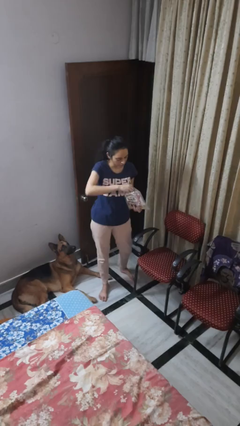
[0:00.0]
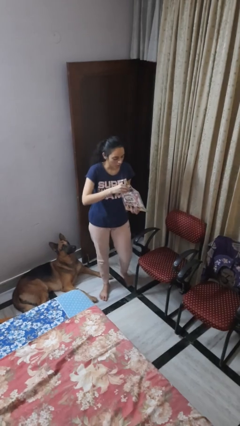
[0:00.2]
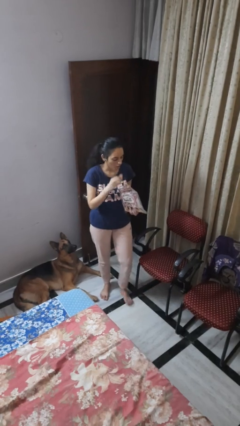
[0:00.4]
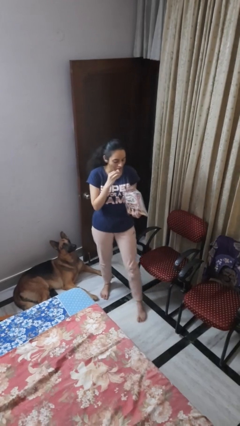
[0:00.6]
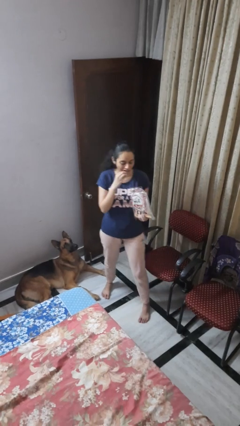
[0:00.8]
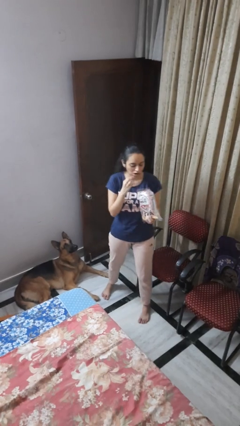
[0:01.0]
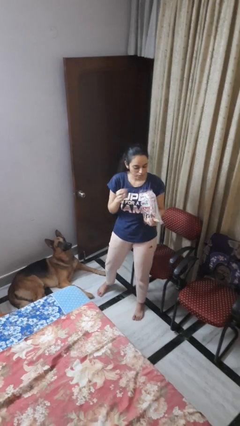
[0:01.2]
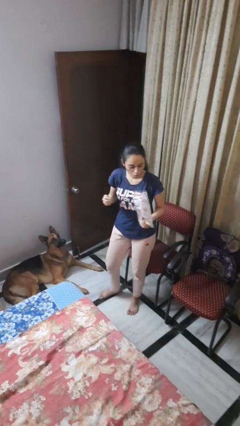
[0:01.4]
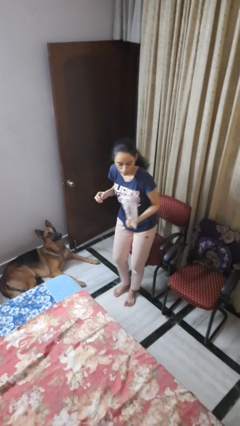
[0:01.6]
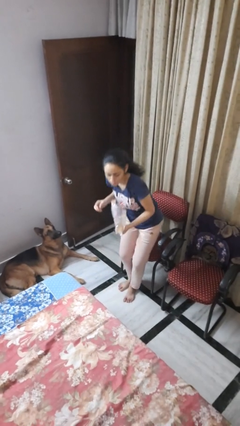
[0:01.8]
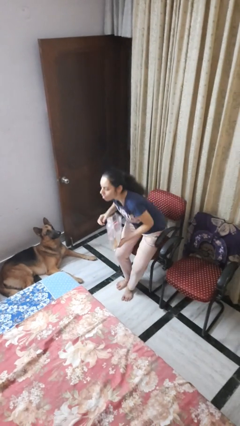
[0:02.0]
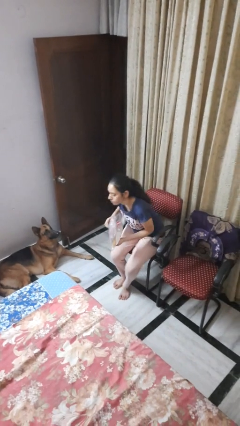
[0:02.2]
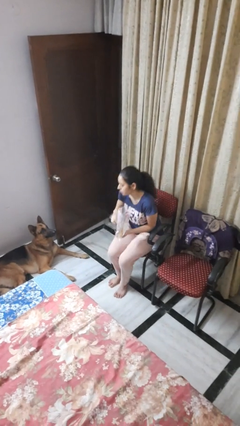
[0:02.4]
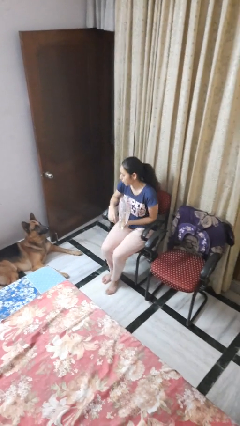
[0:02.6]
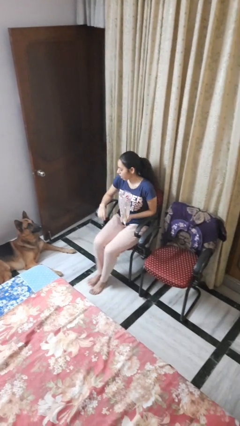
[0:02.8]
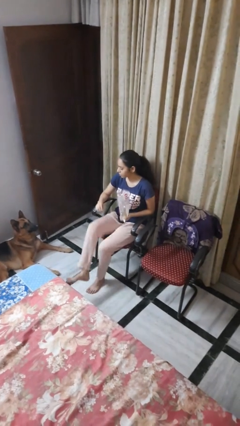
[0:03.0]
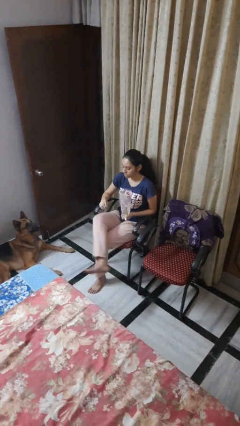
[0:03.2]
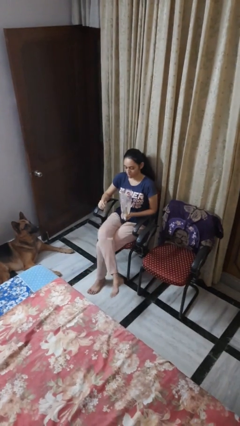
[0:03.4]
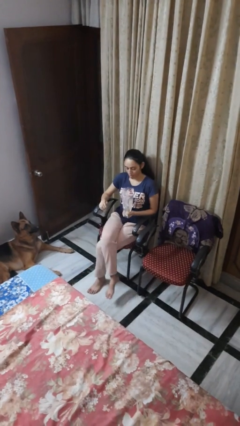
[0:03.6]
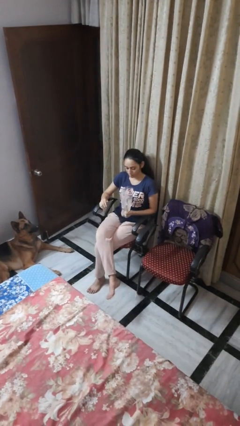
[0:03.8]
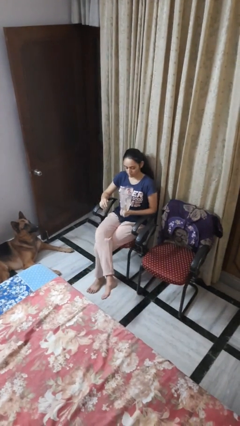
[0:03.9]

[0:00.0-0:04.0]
person eats snack from bag

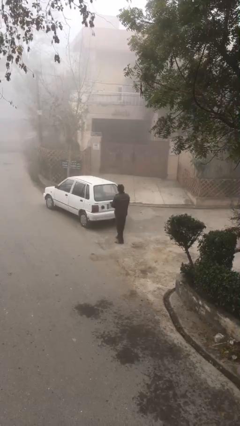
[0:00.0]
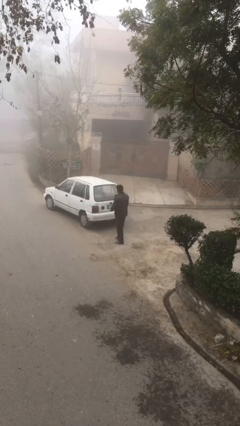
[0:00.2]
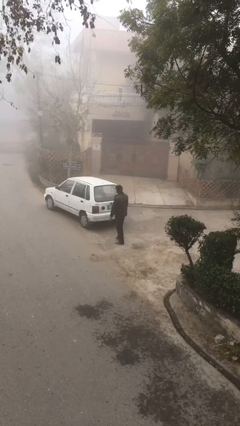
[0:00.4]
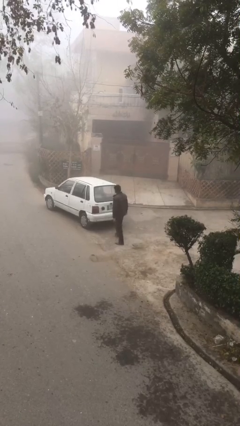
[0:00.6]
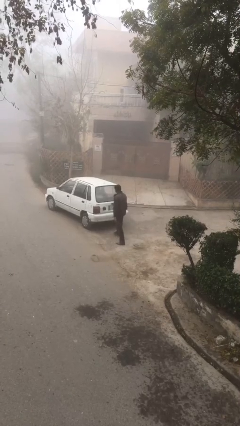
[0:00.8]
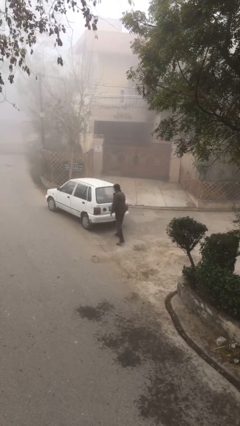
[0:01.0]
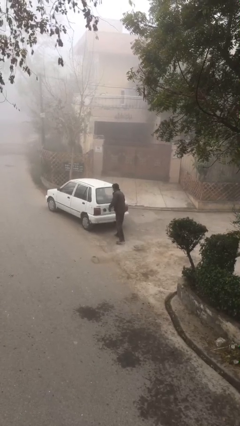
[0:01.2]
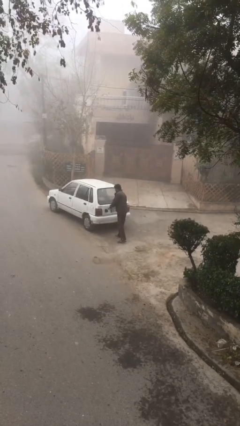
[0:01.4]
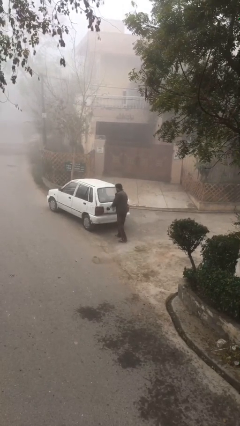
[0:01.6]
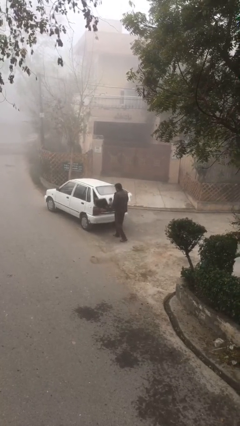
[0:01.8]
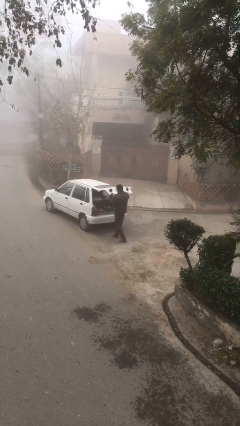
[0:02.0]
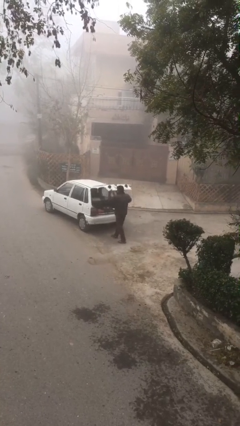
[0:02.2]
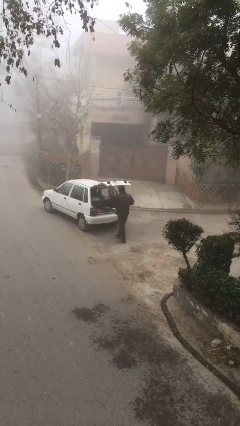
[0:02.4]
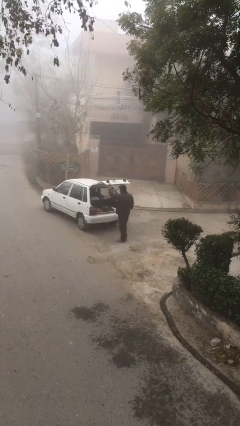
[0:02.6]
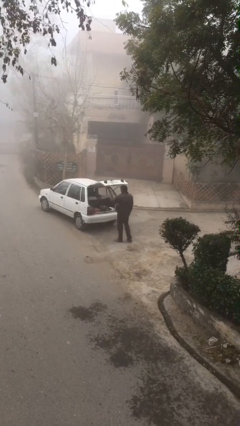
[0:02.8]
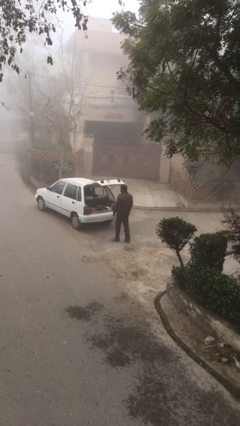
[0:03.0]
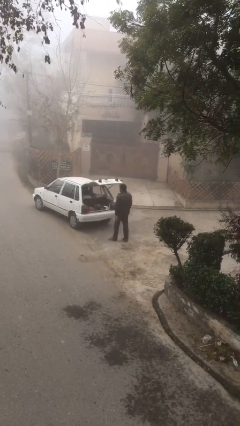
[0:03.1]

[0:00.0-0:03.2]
person opens car trunk

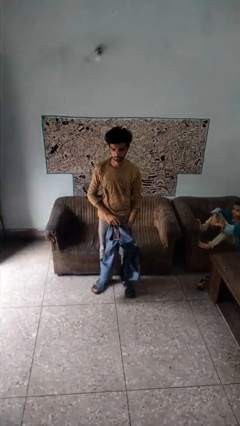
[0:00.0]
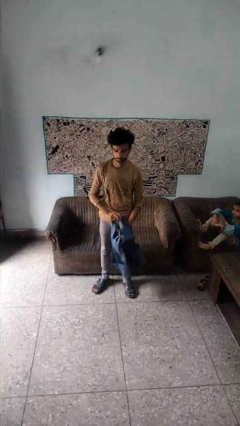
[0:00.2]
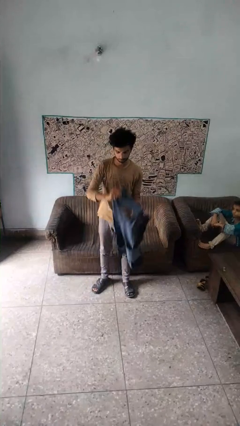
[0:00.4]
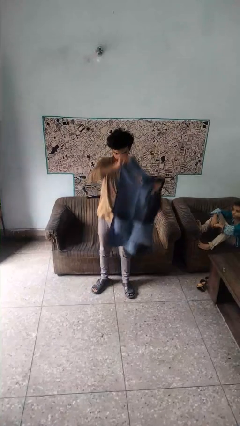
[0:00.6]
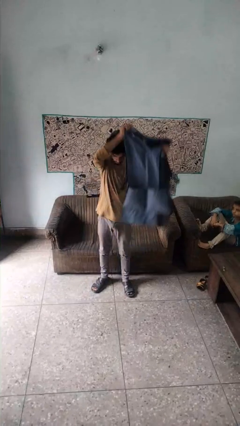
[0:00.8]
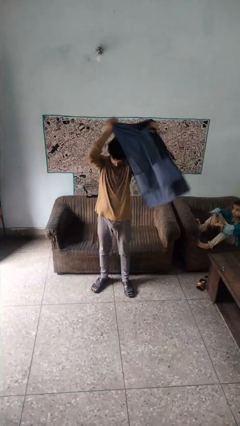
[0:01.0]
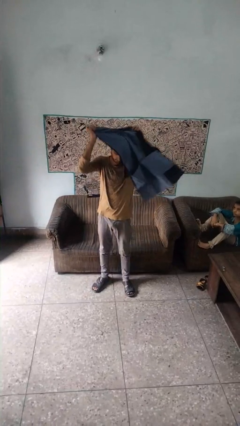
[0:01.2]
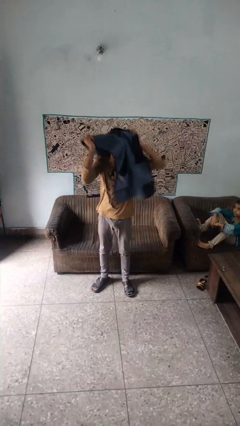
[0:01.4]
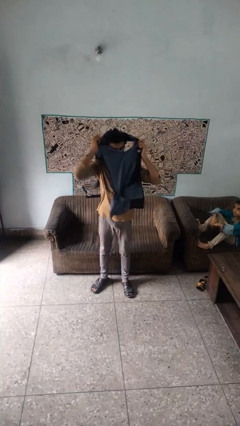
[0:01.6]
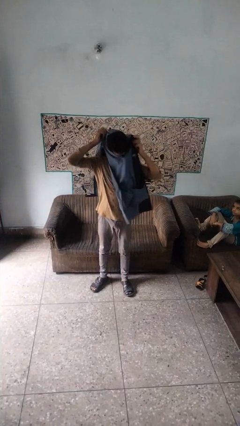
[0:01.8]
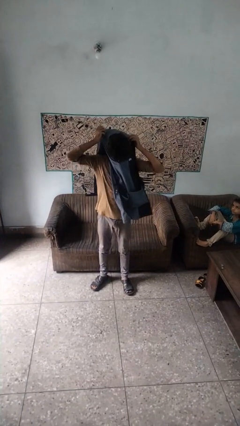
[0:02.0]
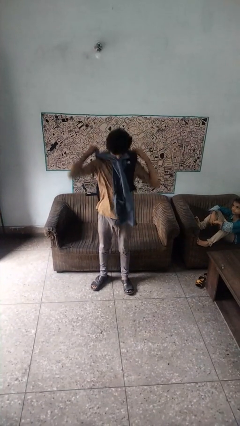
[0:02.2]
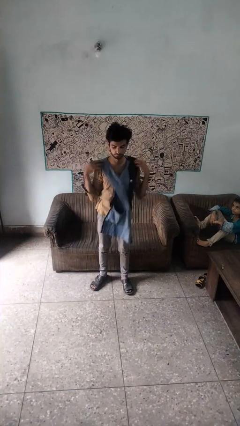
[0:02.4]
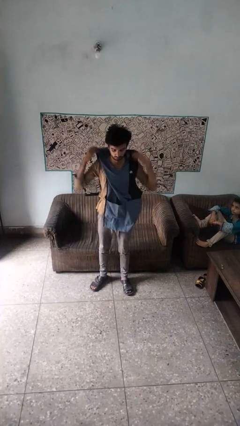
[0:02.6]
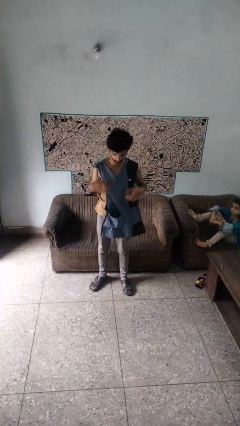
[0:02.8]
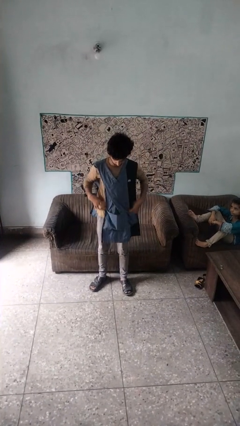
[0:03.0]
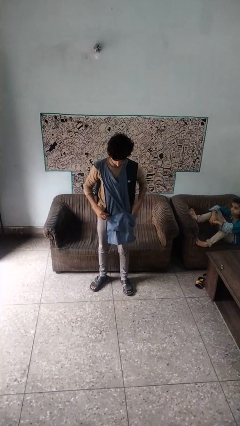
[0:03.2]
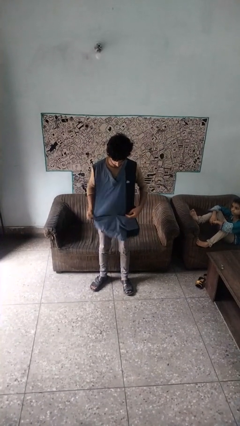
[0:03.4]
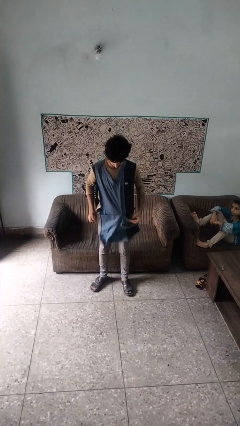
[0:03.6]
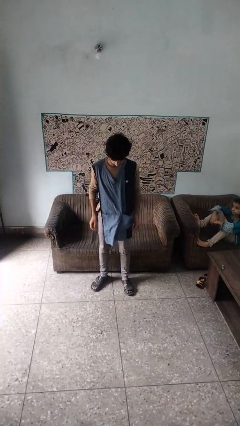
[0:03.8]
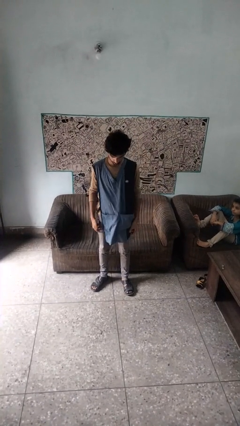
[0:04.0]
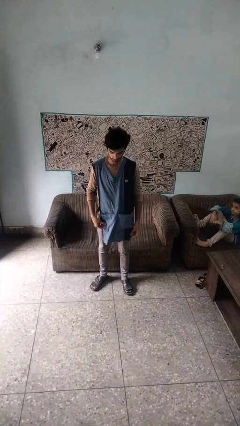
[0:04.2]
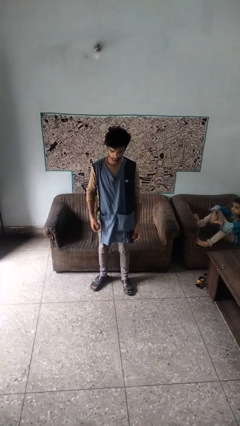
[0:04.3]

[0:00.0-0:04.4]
person puts on apron

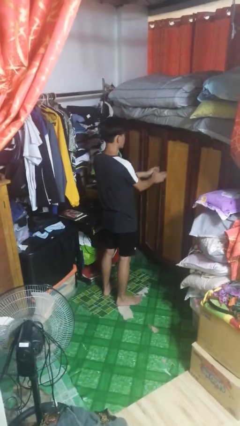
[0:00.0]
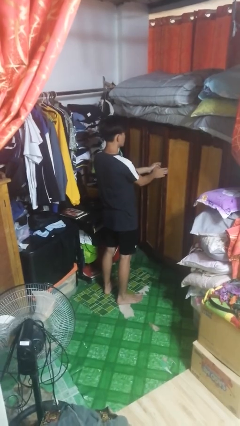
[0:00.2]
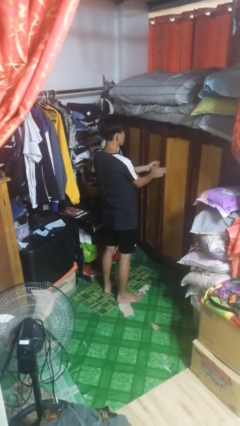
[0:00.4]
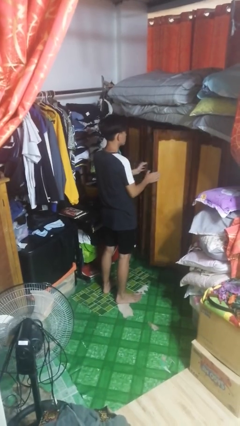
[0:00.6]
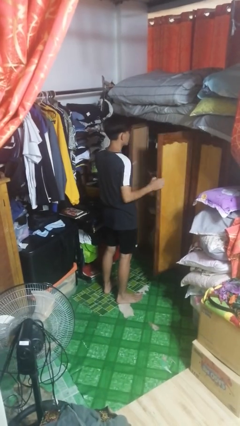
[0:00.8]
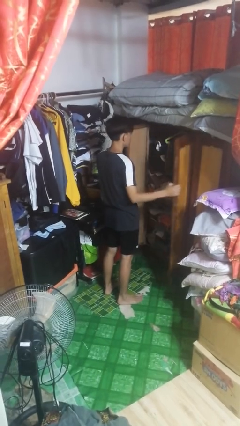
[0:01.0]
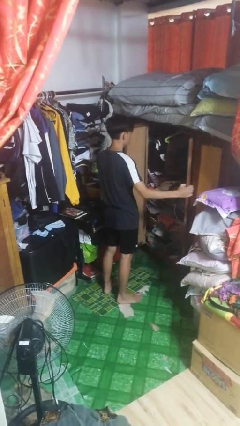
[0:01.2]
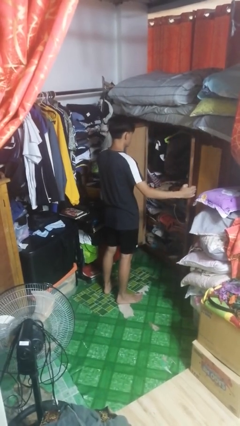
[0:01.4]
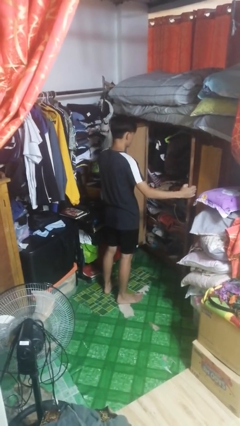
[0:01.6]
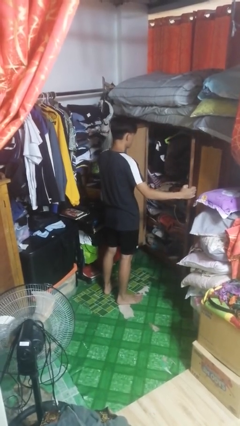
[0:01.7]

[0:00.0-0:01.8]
person opens dresser drawer

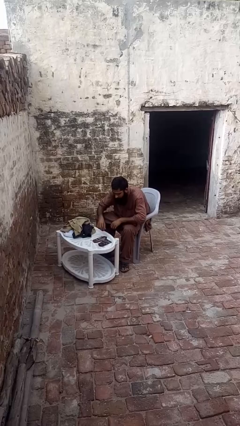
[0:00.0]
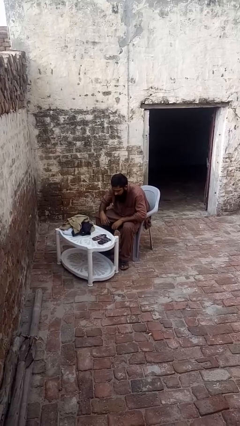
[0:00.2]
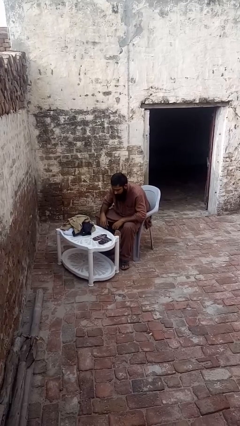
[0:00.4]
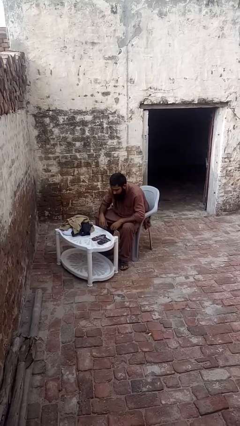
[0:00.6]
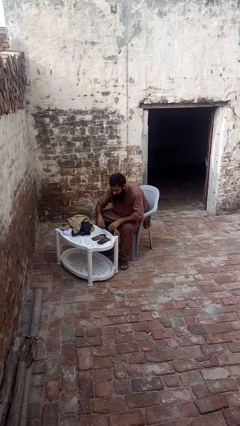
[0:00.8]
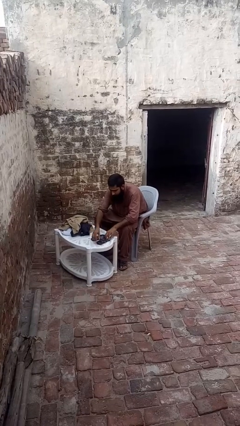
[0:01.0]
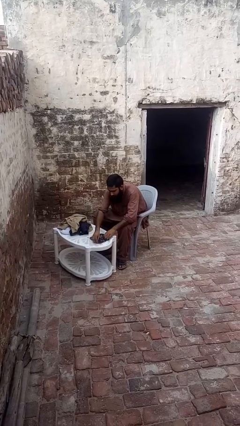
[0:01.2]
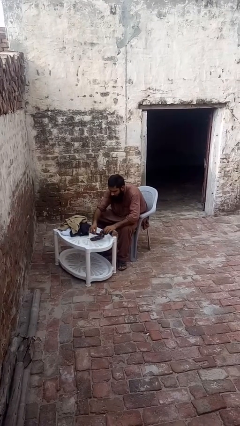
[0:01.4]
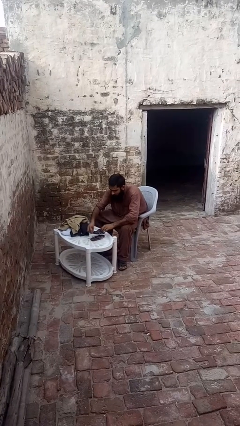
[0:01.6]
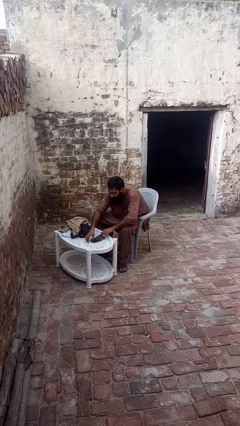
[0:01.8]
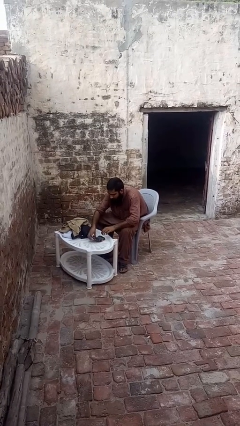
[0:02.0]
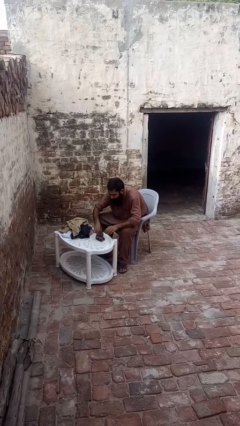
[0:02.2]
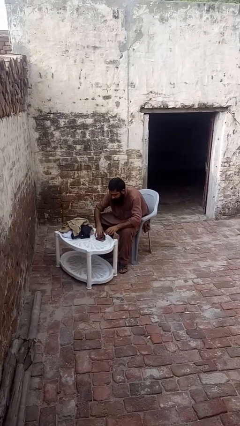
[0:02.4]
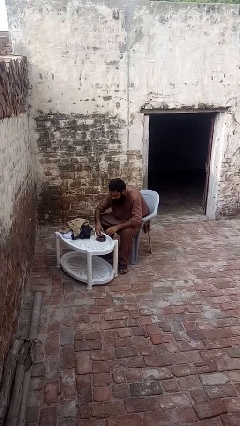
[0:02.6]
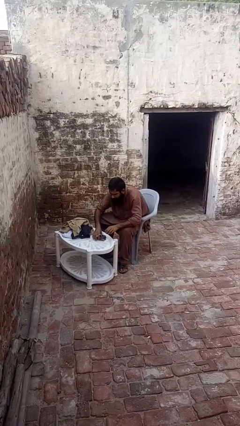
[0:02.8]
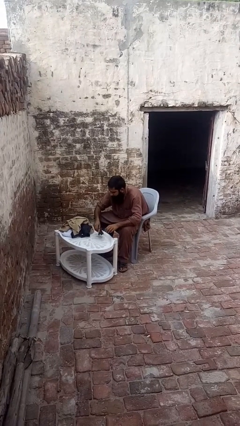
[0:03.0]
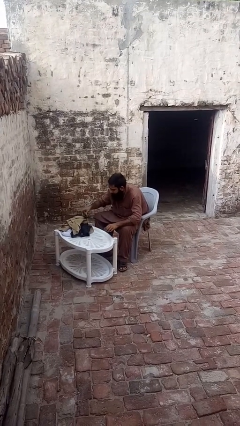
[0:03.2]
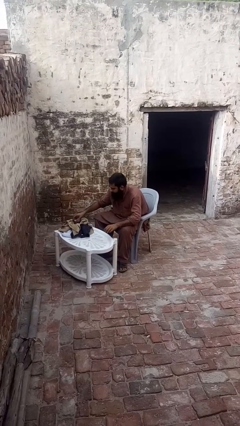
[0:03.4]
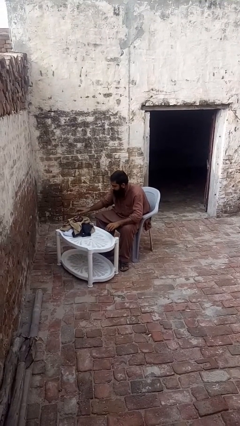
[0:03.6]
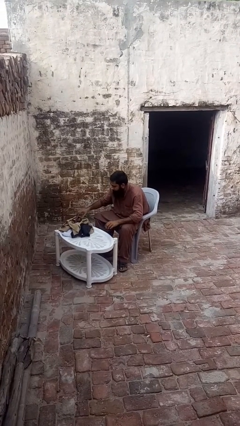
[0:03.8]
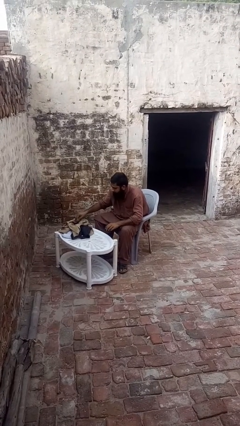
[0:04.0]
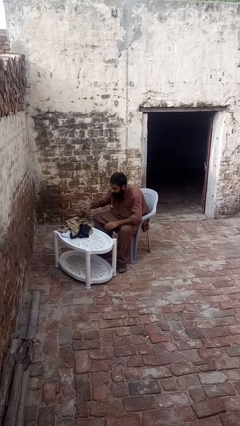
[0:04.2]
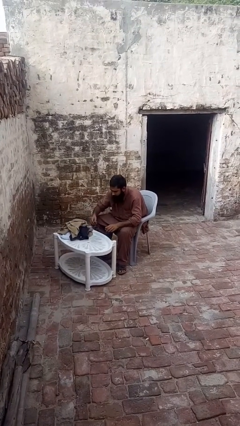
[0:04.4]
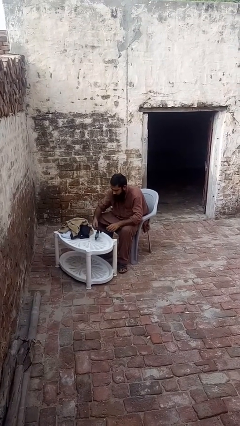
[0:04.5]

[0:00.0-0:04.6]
person folds socks
